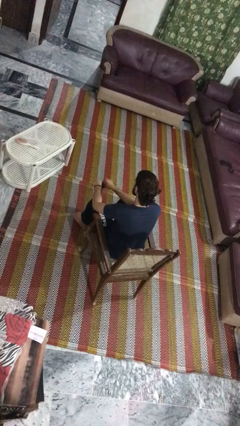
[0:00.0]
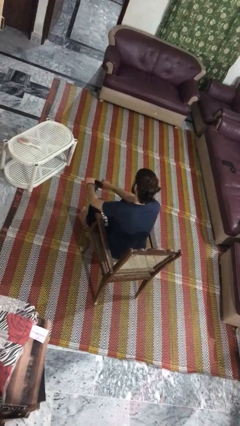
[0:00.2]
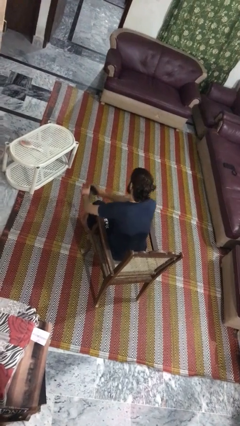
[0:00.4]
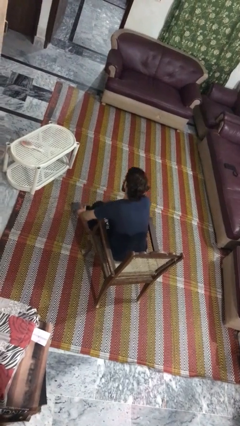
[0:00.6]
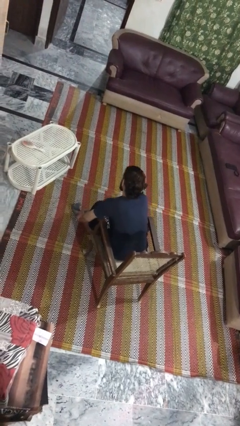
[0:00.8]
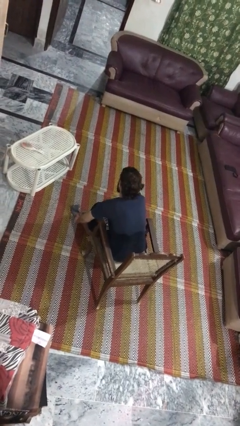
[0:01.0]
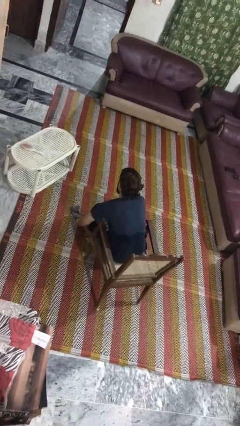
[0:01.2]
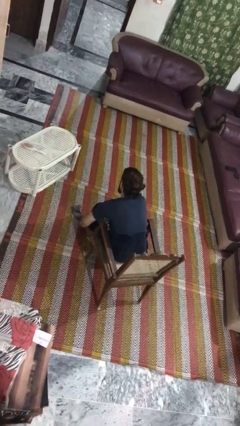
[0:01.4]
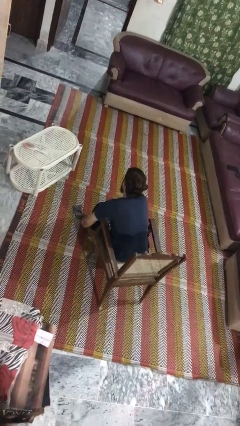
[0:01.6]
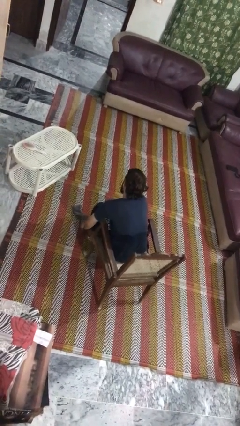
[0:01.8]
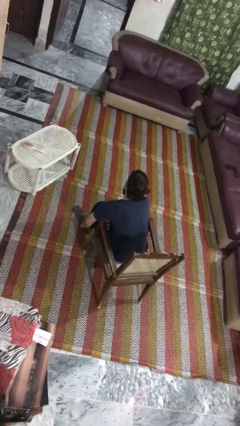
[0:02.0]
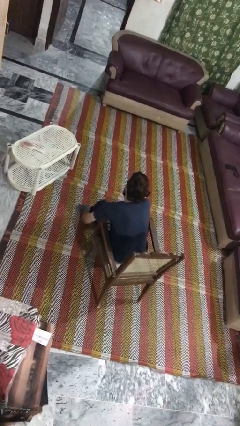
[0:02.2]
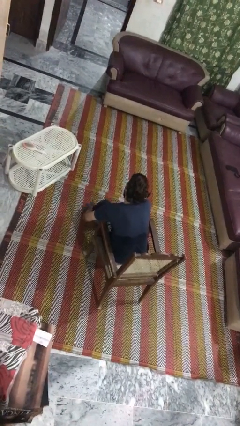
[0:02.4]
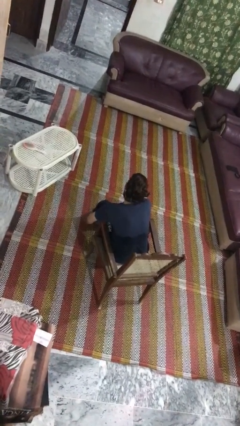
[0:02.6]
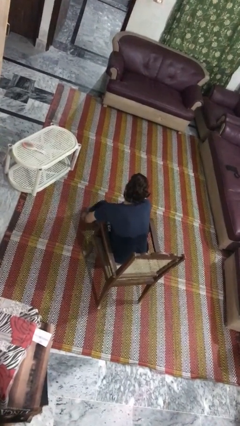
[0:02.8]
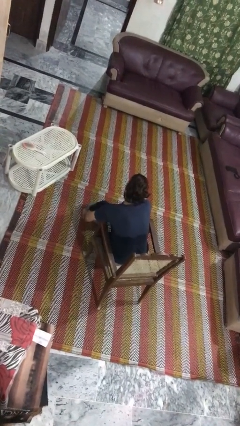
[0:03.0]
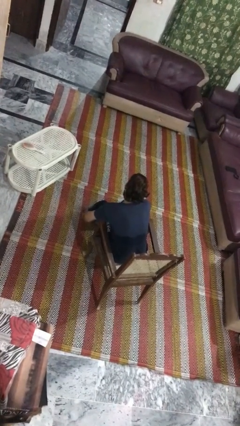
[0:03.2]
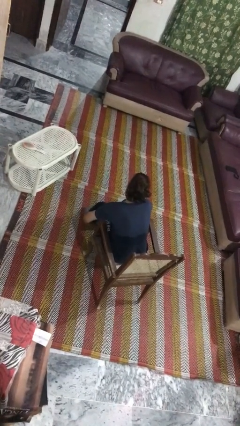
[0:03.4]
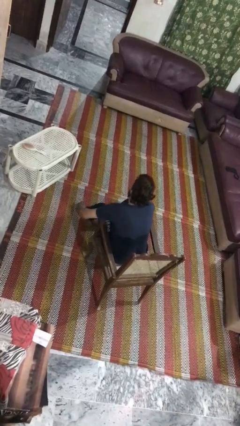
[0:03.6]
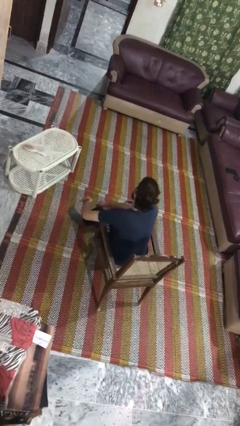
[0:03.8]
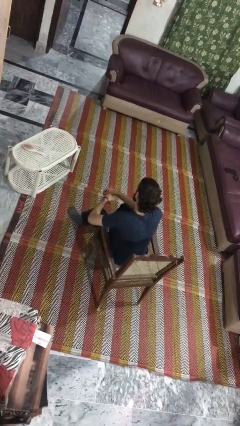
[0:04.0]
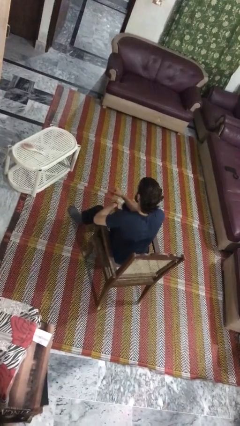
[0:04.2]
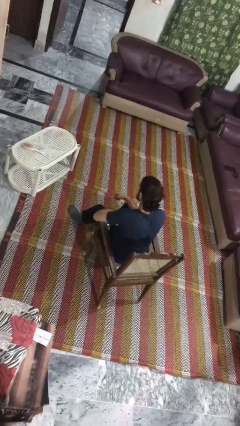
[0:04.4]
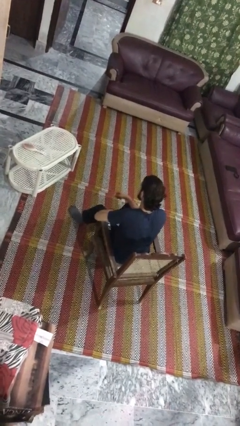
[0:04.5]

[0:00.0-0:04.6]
person puts on socks

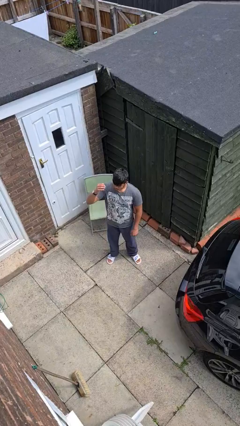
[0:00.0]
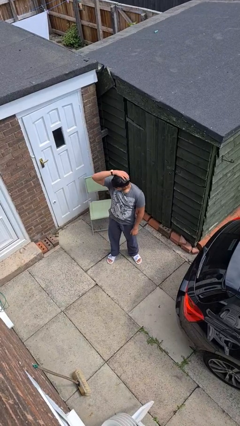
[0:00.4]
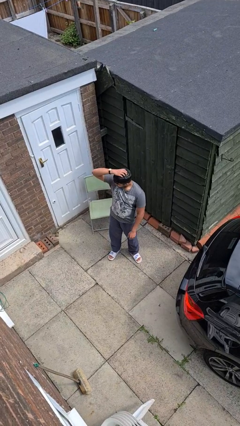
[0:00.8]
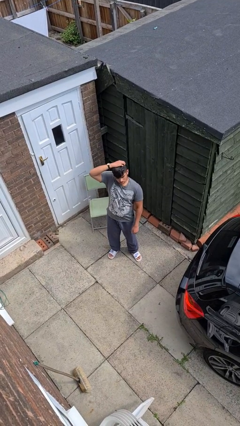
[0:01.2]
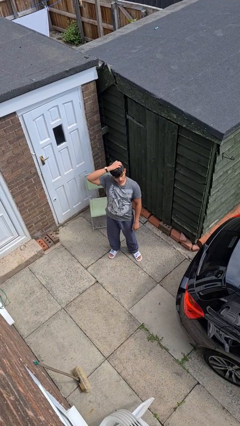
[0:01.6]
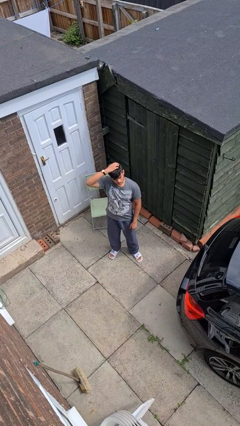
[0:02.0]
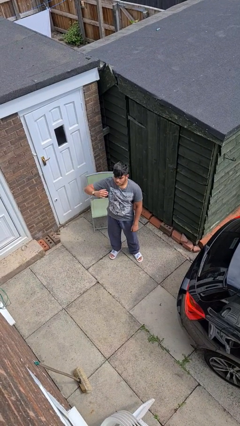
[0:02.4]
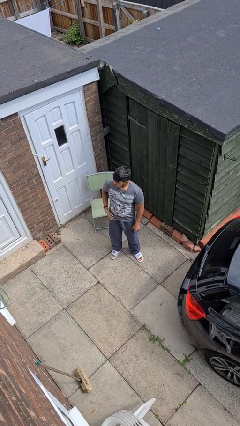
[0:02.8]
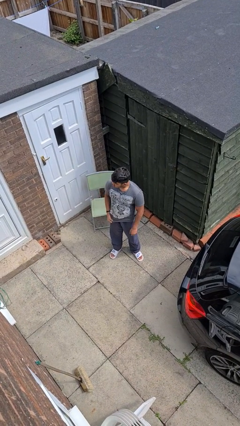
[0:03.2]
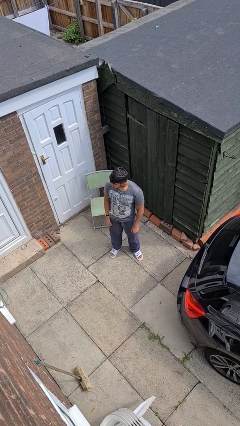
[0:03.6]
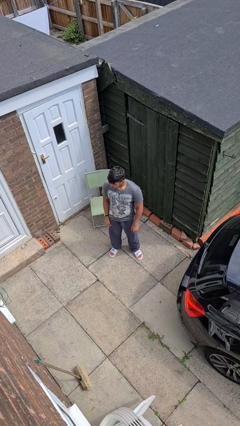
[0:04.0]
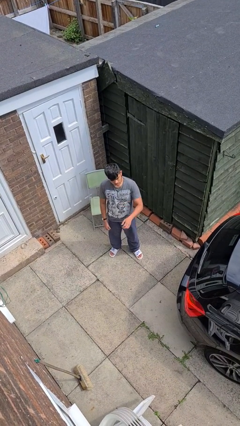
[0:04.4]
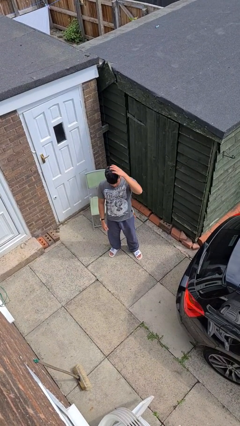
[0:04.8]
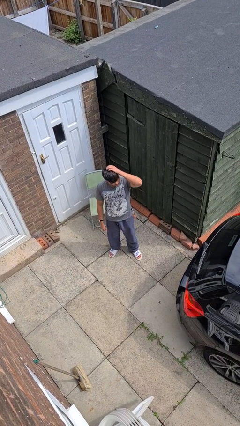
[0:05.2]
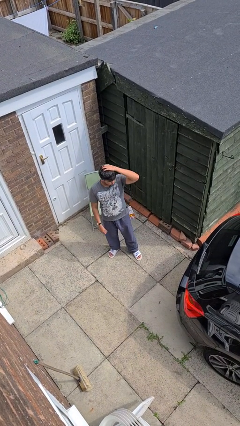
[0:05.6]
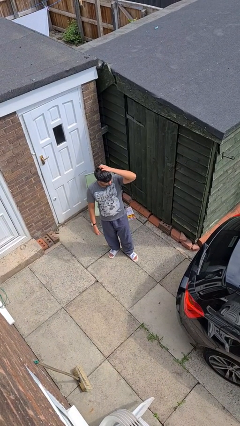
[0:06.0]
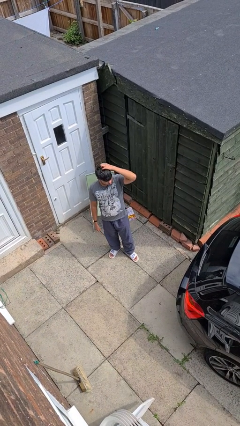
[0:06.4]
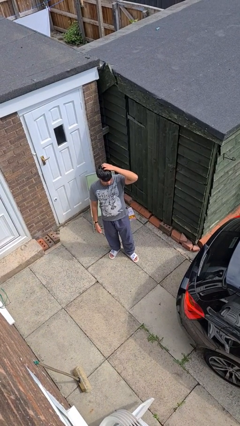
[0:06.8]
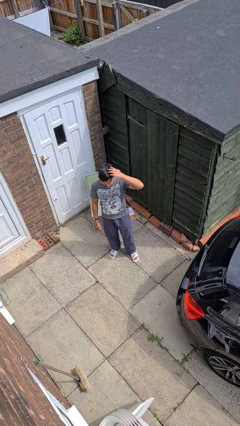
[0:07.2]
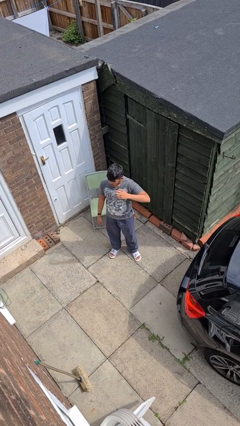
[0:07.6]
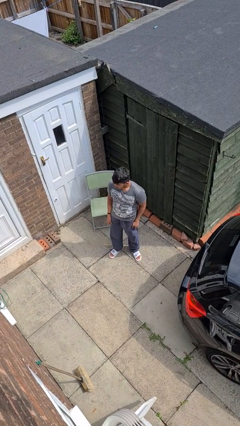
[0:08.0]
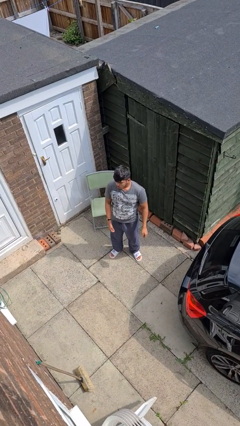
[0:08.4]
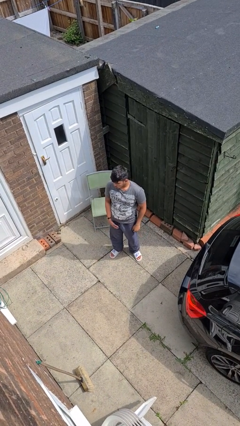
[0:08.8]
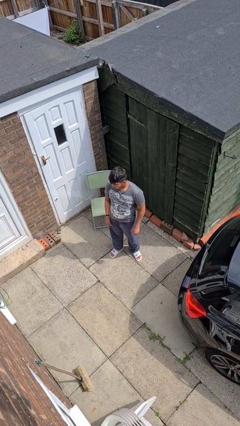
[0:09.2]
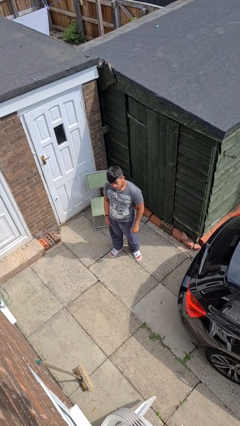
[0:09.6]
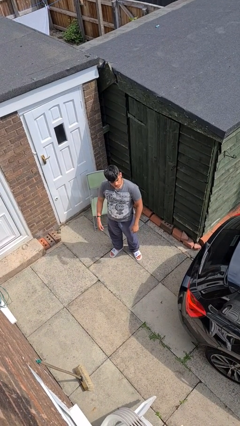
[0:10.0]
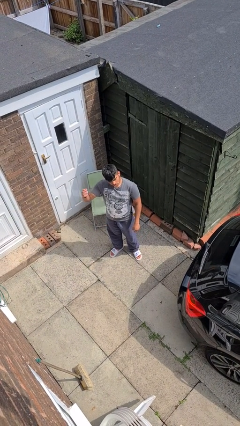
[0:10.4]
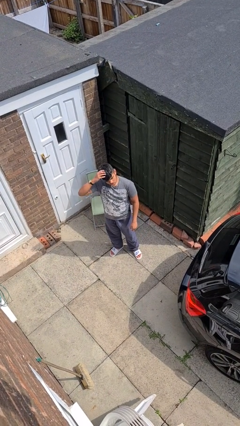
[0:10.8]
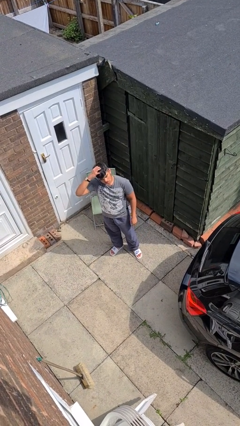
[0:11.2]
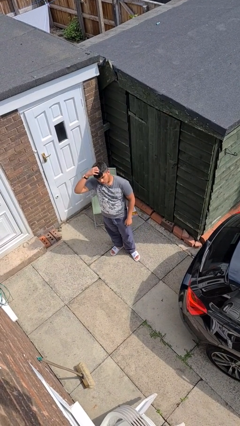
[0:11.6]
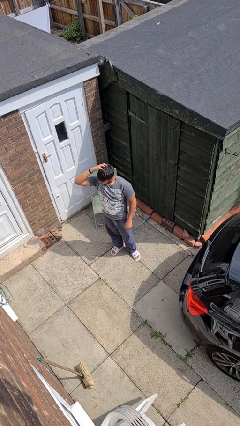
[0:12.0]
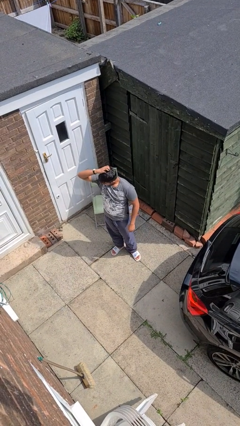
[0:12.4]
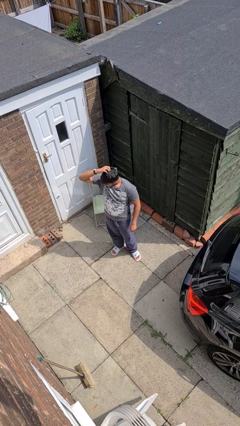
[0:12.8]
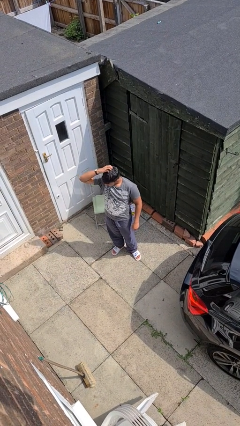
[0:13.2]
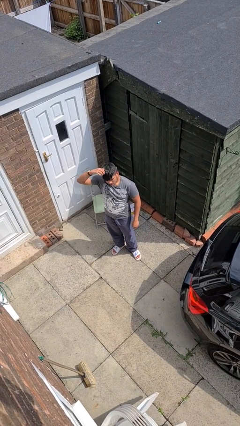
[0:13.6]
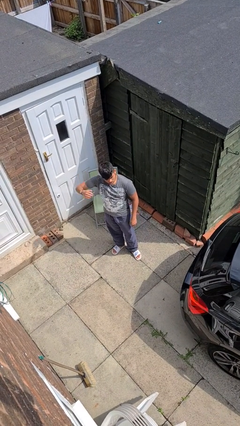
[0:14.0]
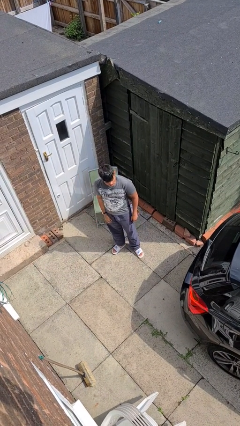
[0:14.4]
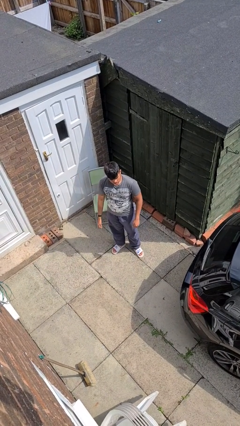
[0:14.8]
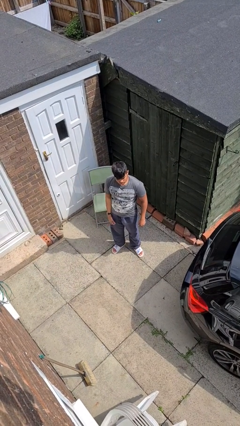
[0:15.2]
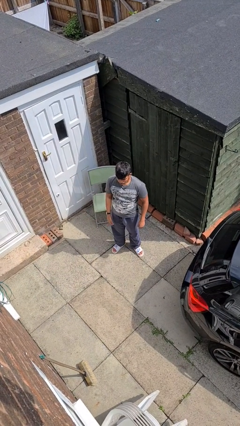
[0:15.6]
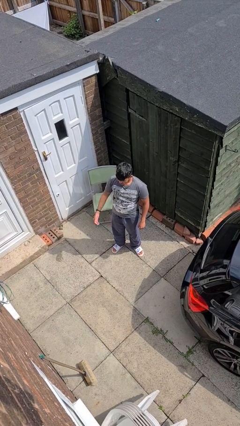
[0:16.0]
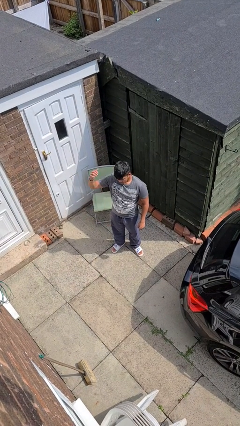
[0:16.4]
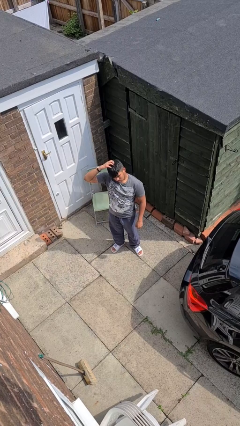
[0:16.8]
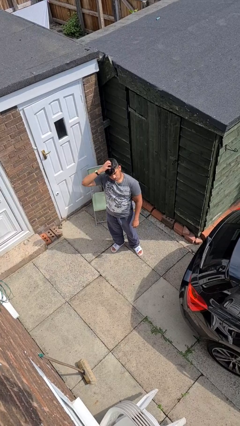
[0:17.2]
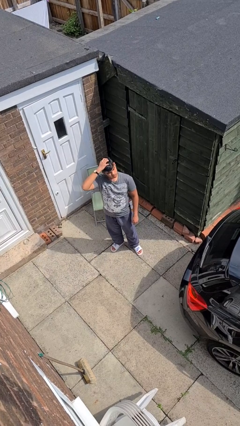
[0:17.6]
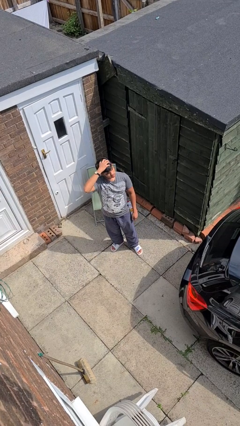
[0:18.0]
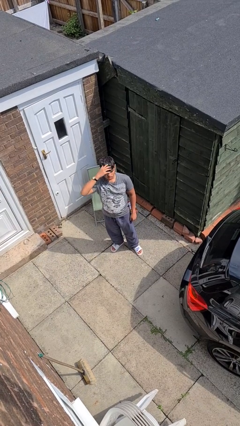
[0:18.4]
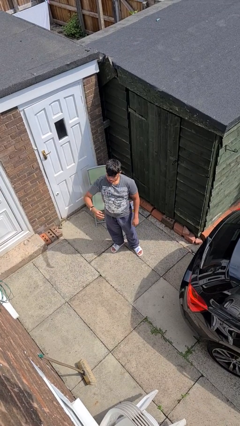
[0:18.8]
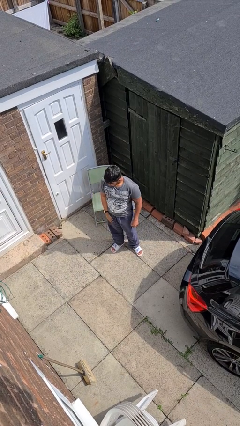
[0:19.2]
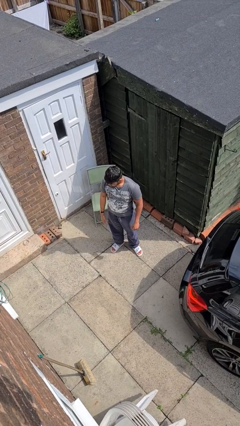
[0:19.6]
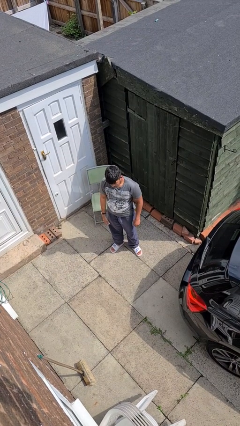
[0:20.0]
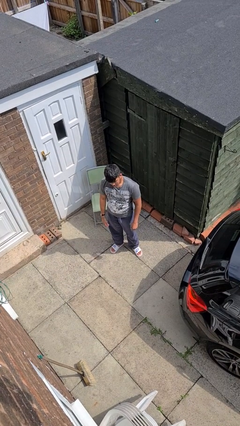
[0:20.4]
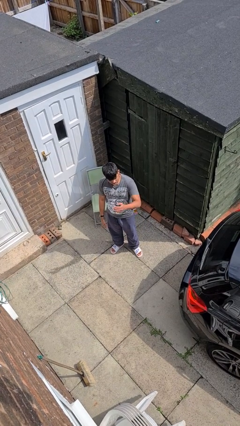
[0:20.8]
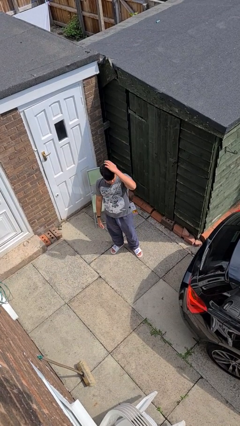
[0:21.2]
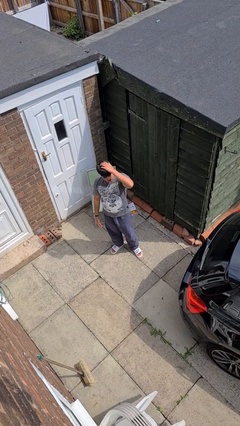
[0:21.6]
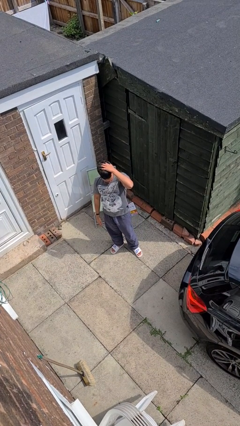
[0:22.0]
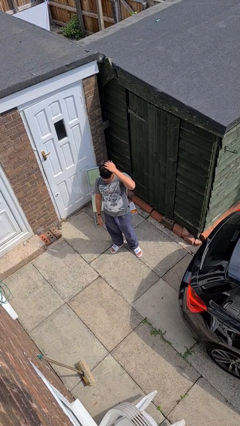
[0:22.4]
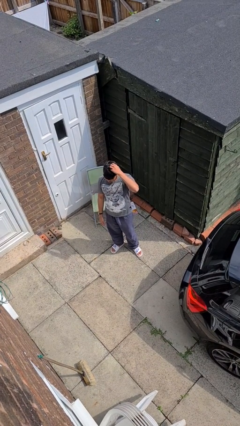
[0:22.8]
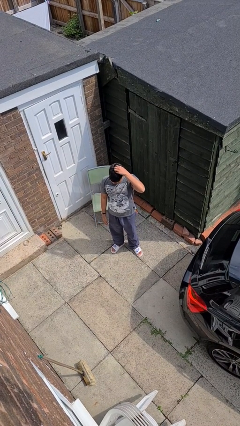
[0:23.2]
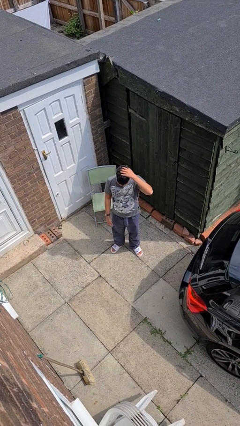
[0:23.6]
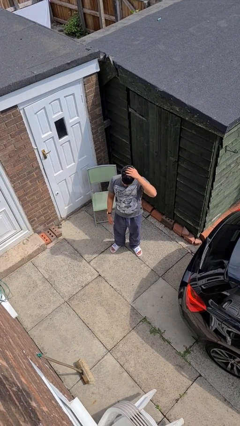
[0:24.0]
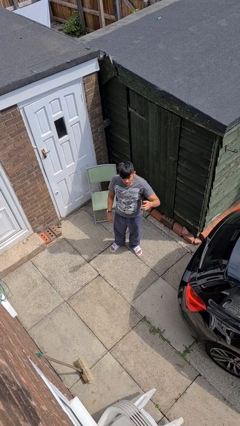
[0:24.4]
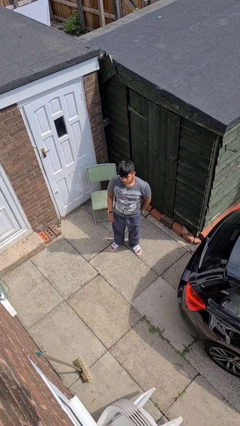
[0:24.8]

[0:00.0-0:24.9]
person scratches face

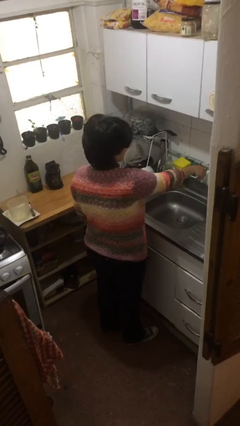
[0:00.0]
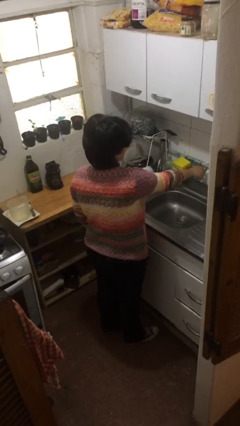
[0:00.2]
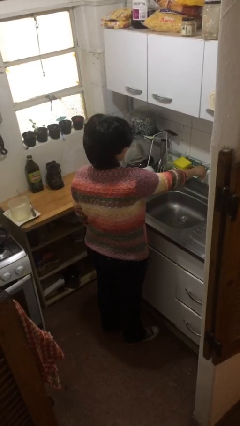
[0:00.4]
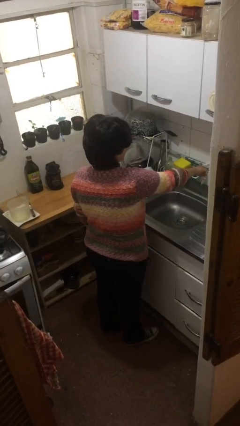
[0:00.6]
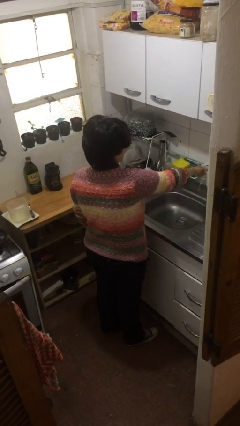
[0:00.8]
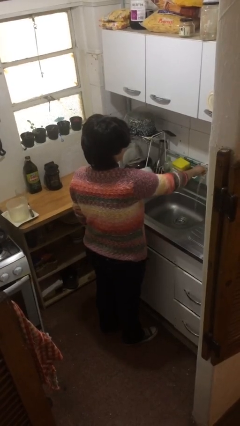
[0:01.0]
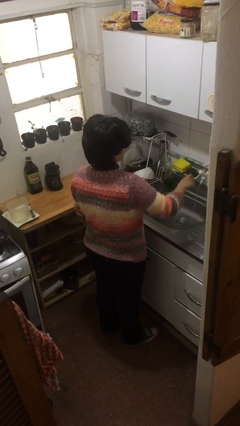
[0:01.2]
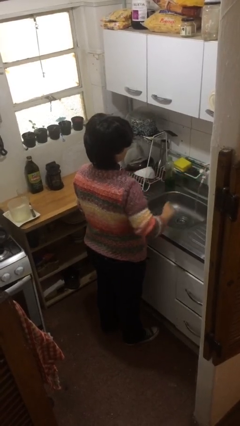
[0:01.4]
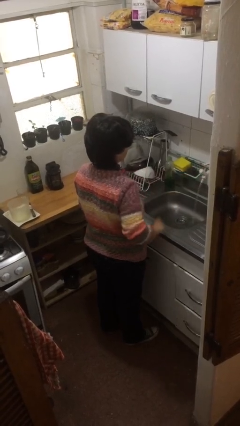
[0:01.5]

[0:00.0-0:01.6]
person turns on faucet
